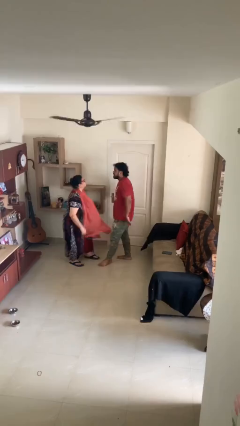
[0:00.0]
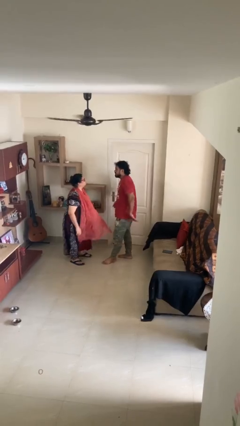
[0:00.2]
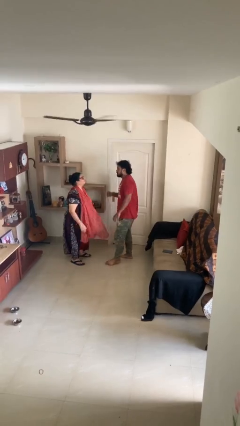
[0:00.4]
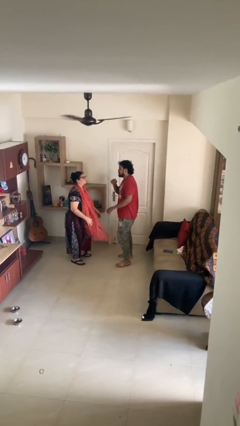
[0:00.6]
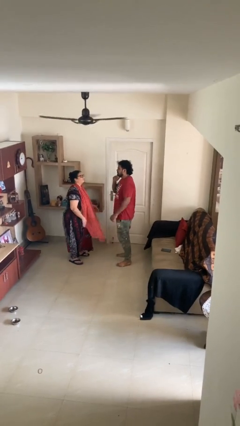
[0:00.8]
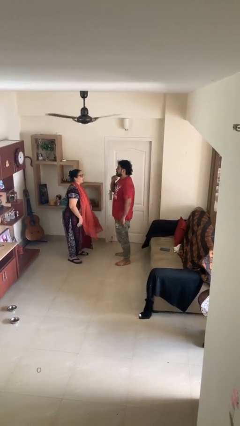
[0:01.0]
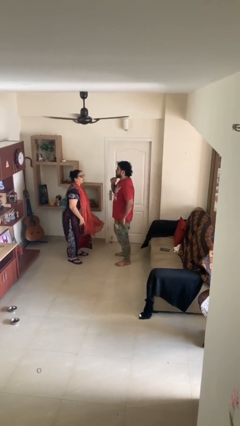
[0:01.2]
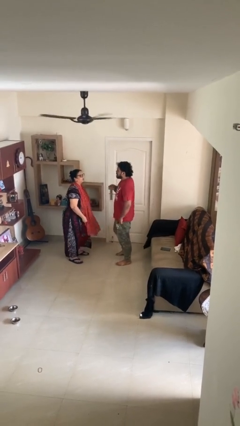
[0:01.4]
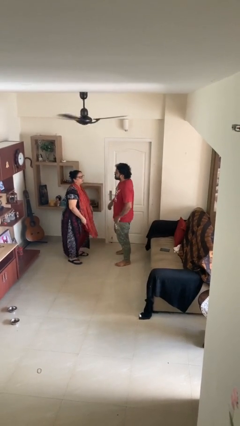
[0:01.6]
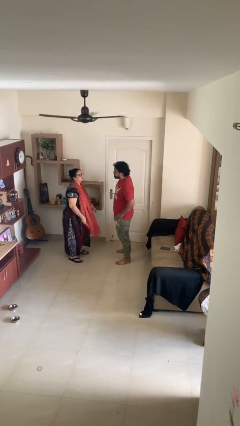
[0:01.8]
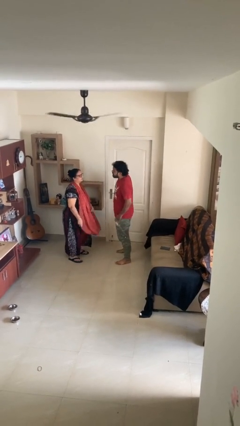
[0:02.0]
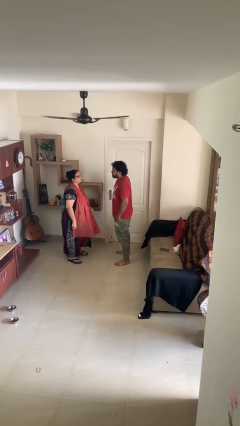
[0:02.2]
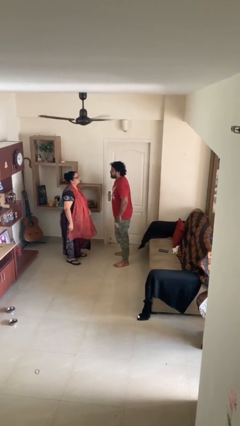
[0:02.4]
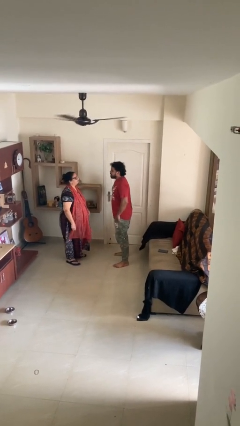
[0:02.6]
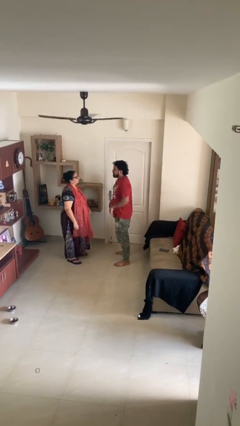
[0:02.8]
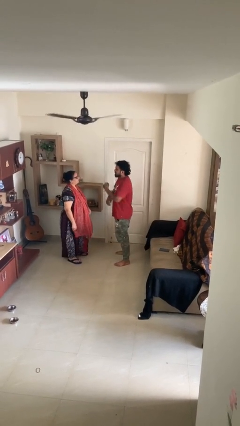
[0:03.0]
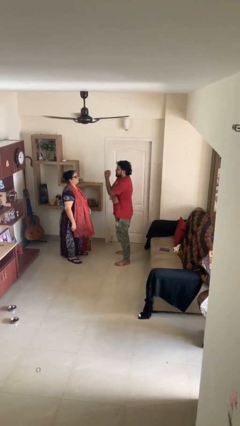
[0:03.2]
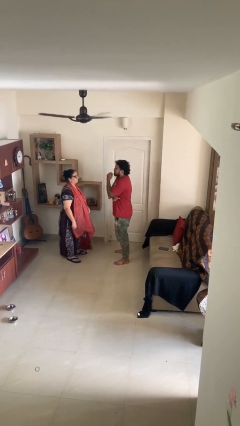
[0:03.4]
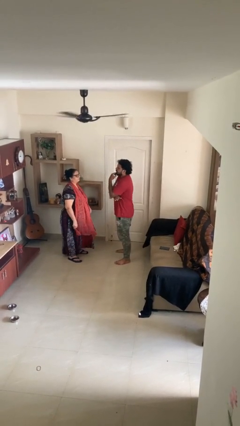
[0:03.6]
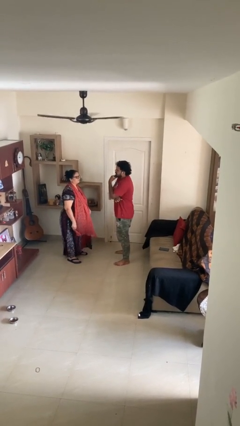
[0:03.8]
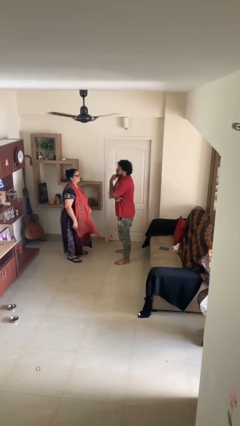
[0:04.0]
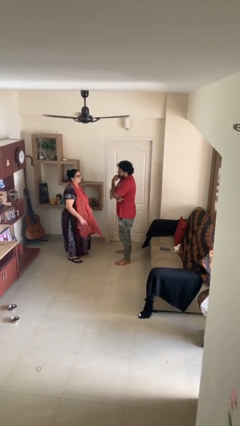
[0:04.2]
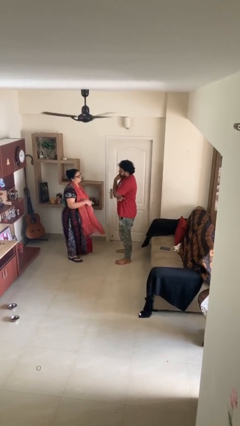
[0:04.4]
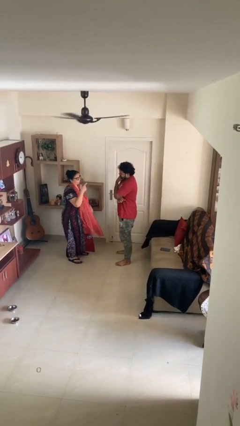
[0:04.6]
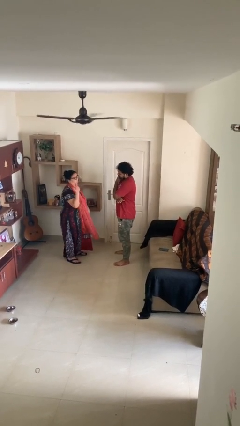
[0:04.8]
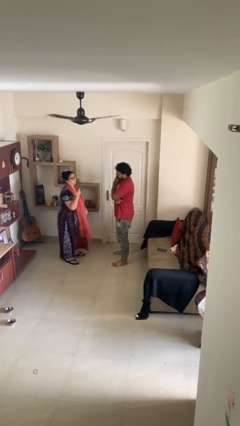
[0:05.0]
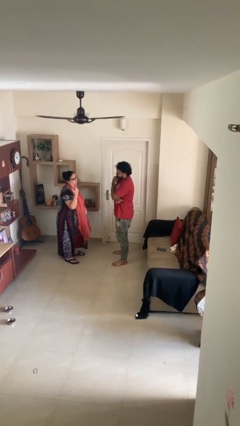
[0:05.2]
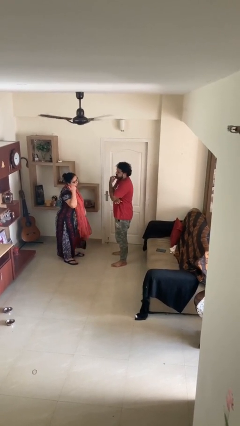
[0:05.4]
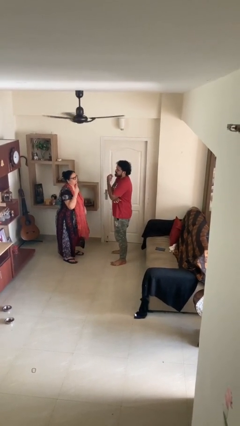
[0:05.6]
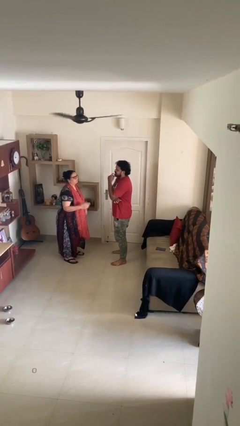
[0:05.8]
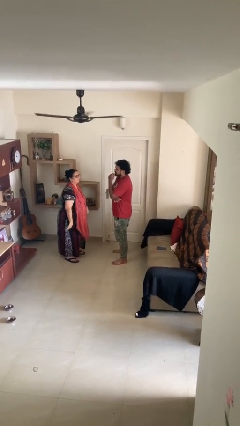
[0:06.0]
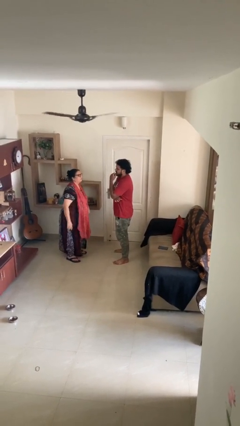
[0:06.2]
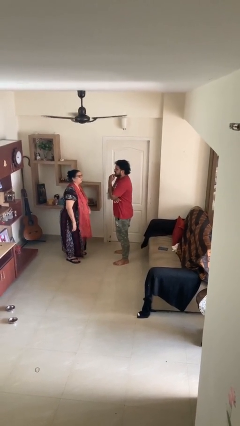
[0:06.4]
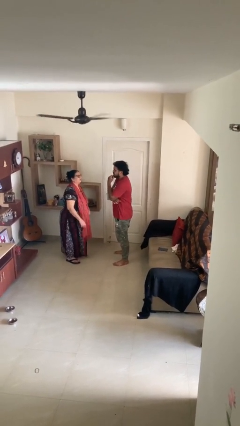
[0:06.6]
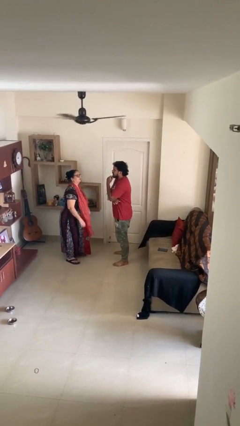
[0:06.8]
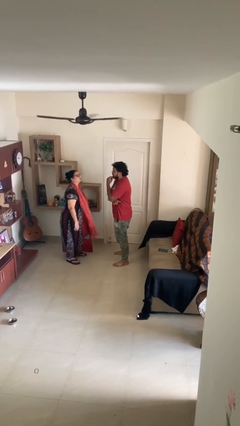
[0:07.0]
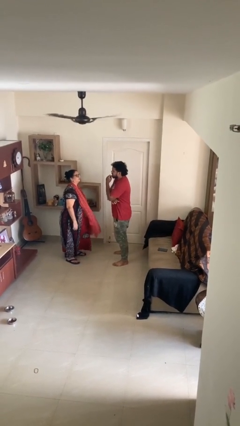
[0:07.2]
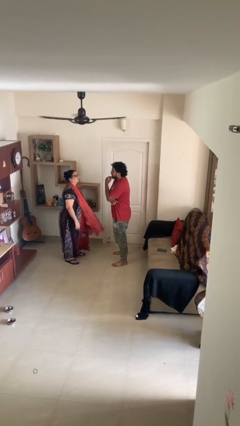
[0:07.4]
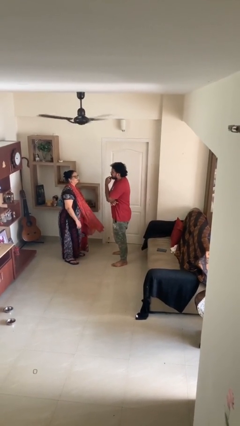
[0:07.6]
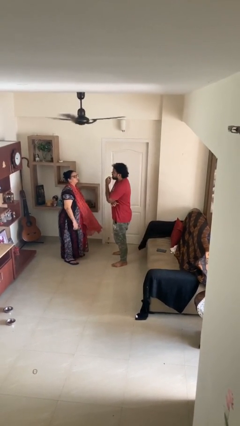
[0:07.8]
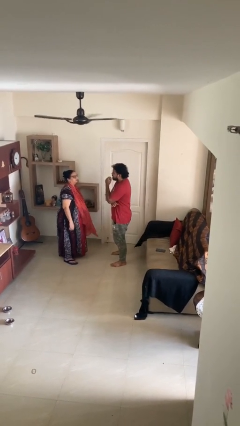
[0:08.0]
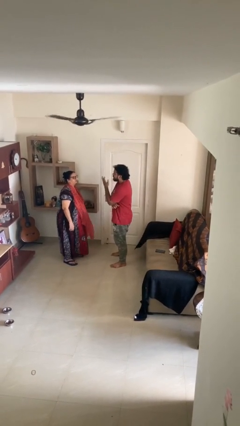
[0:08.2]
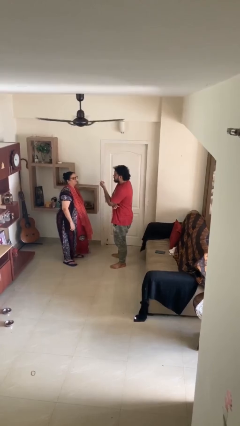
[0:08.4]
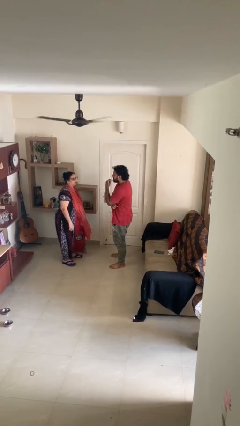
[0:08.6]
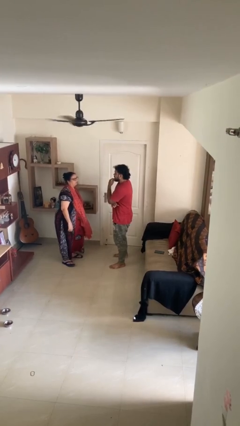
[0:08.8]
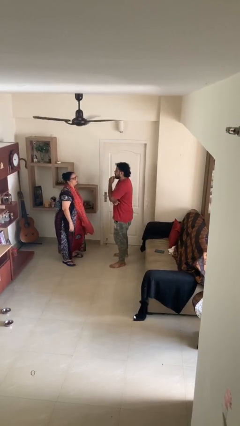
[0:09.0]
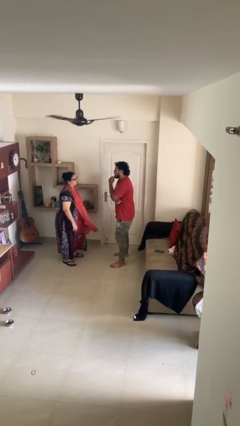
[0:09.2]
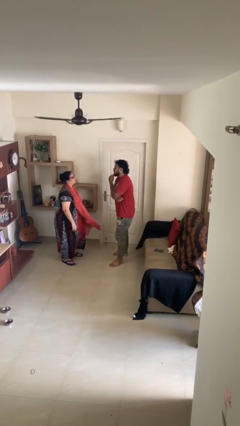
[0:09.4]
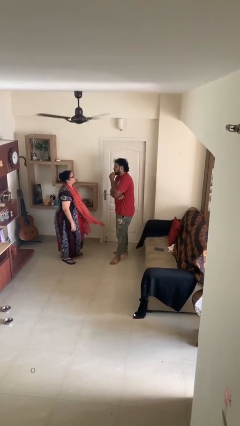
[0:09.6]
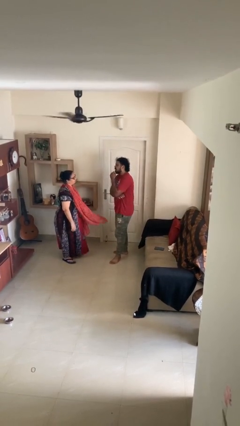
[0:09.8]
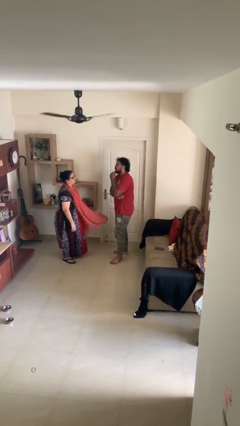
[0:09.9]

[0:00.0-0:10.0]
person talks to person

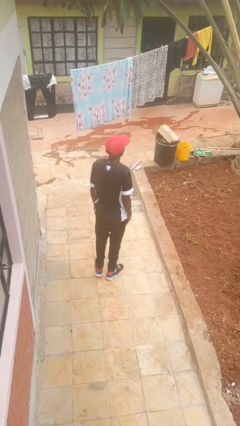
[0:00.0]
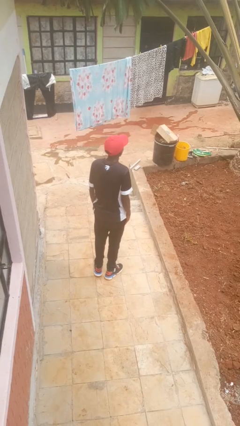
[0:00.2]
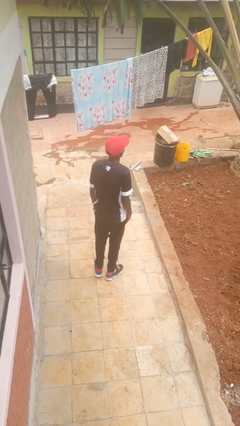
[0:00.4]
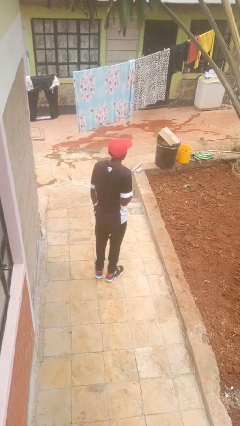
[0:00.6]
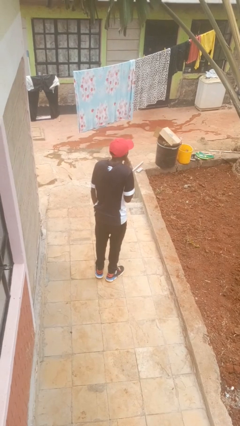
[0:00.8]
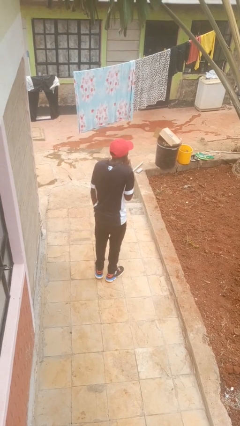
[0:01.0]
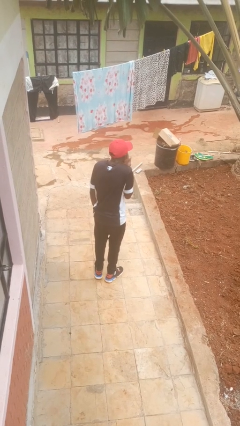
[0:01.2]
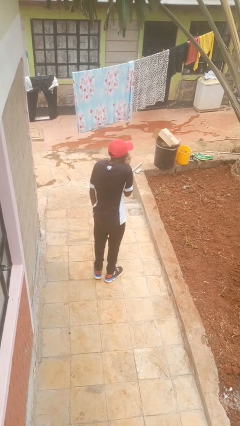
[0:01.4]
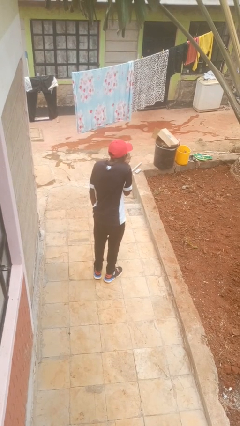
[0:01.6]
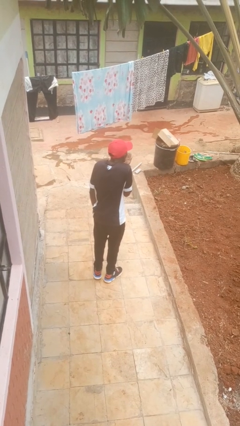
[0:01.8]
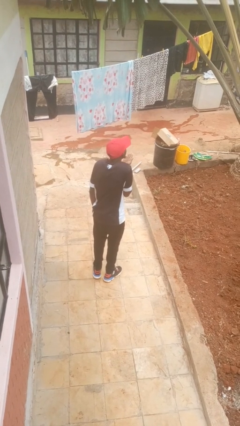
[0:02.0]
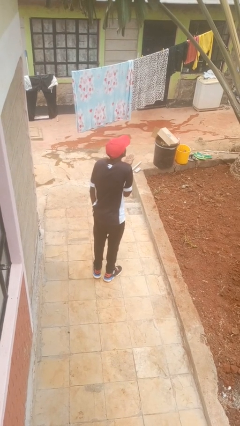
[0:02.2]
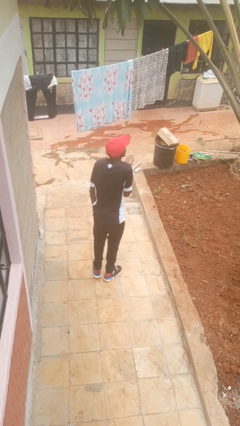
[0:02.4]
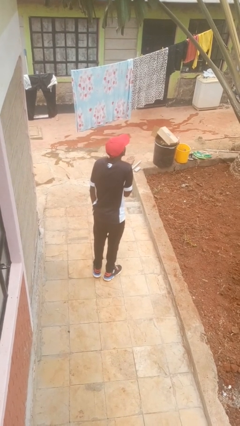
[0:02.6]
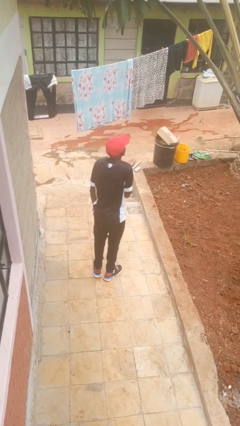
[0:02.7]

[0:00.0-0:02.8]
person gestures blow kiss

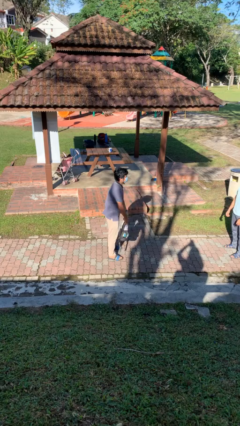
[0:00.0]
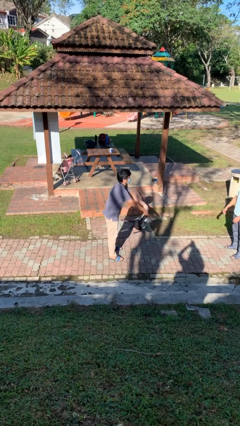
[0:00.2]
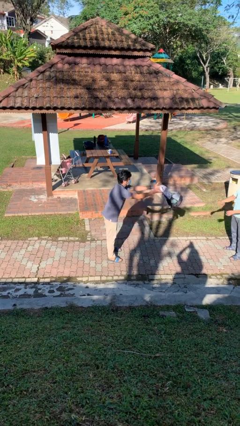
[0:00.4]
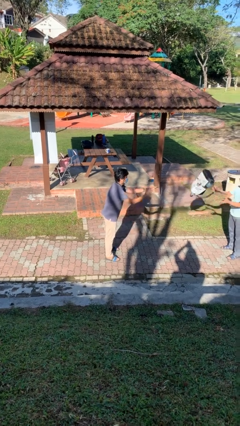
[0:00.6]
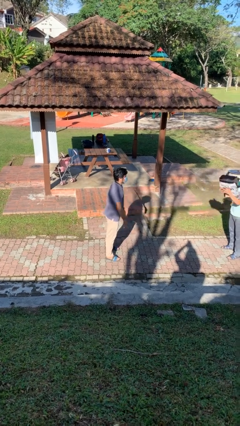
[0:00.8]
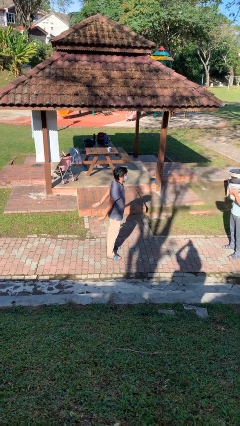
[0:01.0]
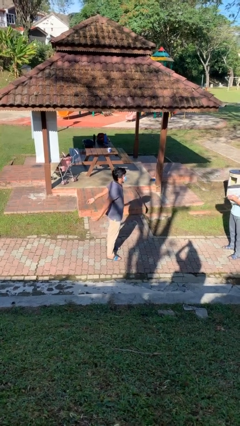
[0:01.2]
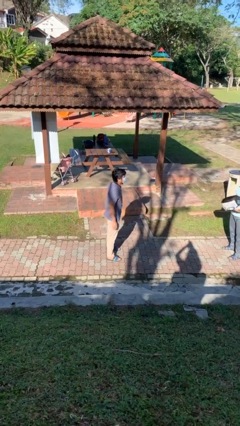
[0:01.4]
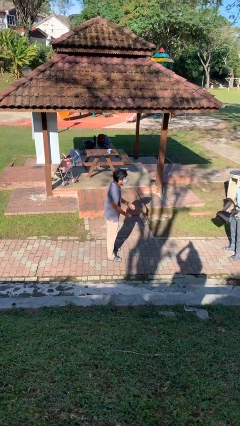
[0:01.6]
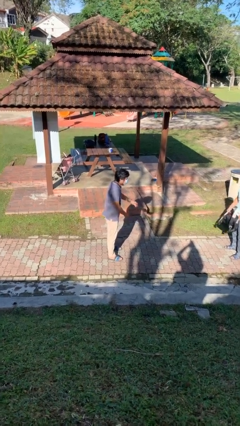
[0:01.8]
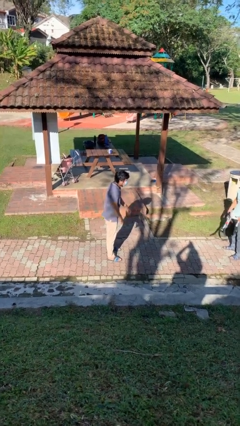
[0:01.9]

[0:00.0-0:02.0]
person throws object to person

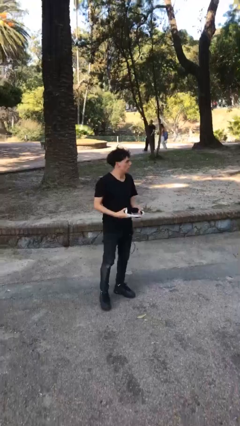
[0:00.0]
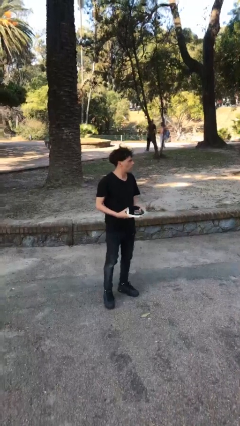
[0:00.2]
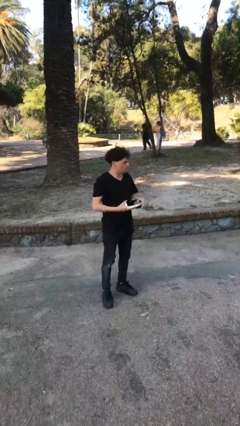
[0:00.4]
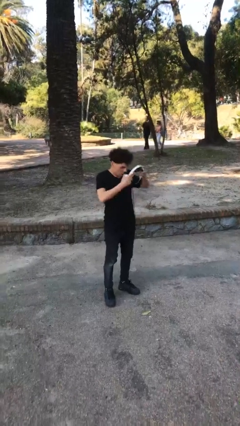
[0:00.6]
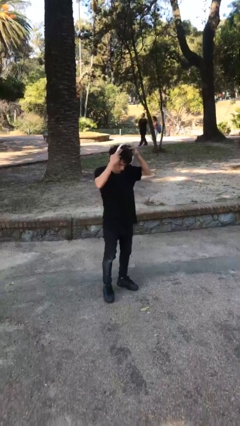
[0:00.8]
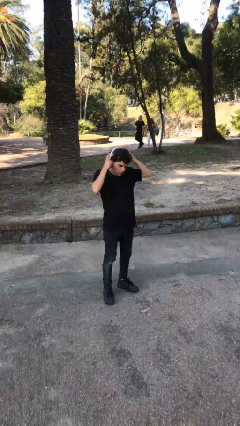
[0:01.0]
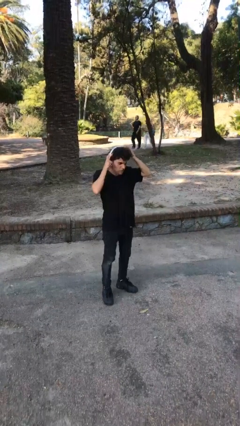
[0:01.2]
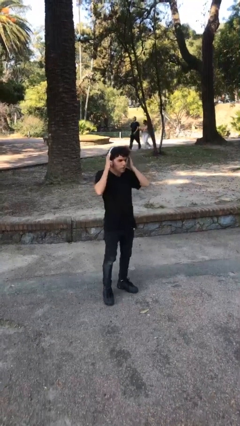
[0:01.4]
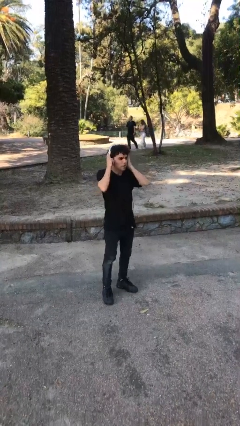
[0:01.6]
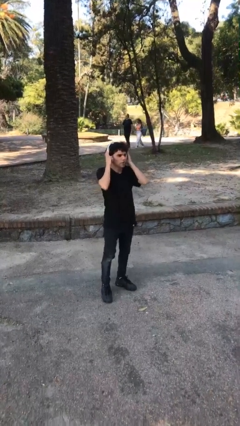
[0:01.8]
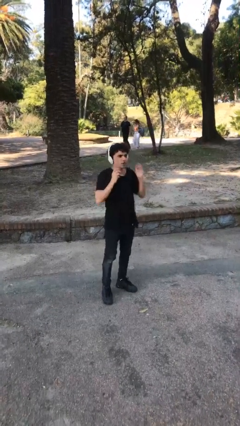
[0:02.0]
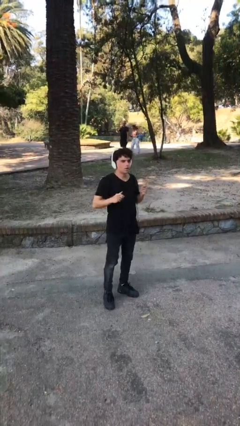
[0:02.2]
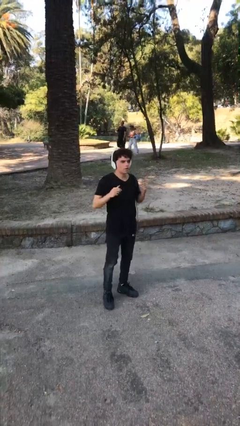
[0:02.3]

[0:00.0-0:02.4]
person puts on headphones

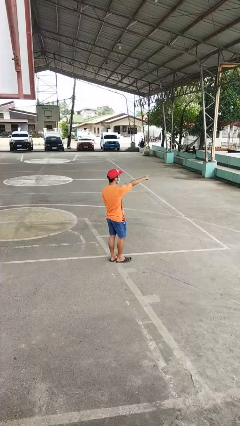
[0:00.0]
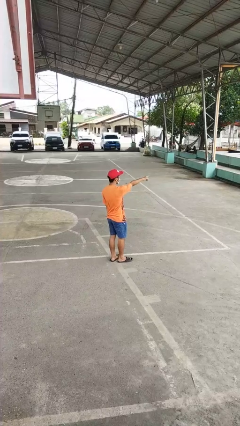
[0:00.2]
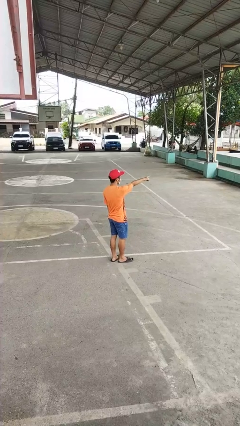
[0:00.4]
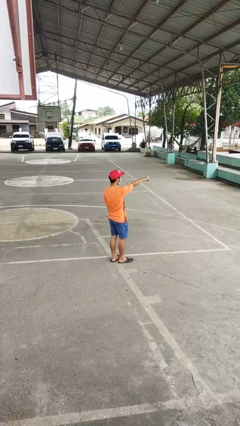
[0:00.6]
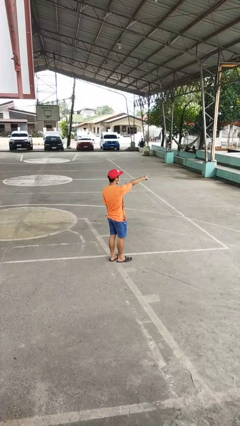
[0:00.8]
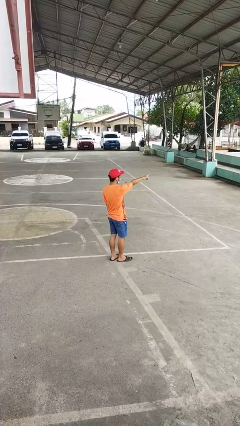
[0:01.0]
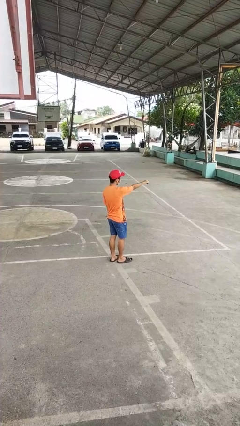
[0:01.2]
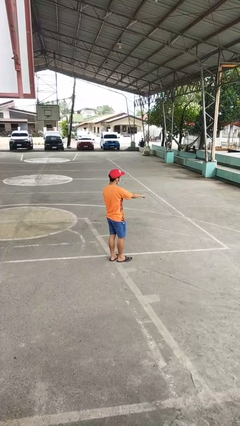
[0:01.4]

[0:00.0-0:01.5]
person points at person
